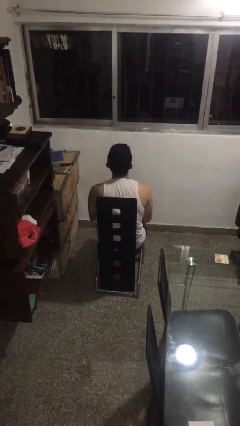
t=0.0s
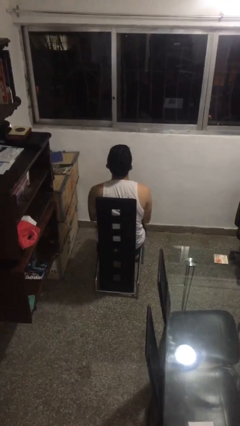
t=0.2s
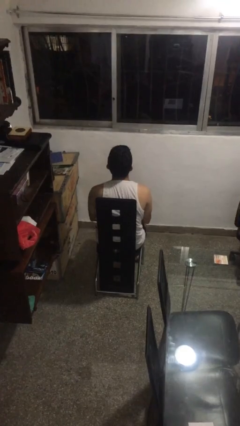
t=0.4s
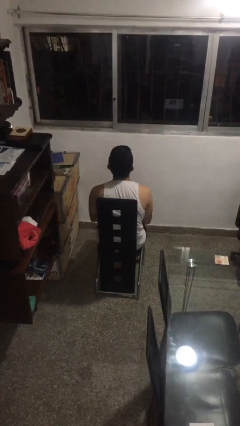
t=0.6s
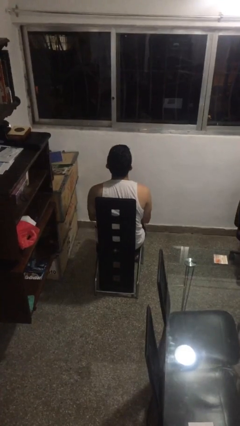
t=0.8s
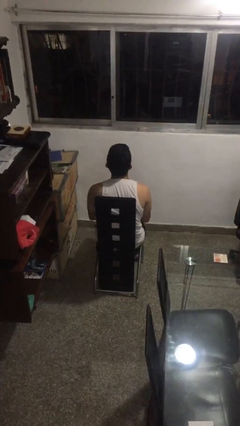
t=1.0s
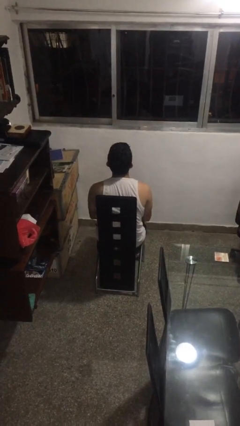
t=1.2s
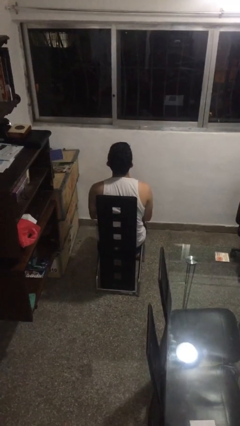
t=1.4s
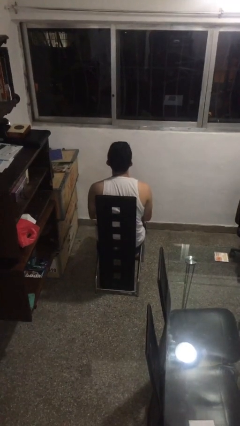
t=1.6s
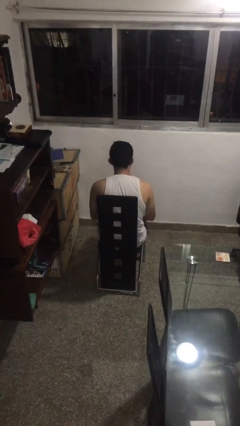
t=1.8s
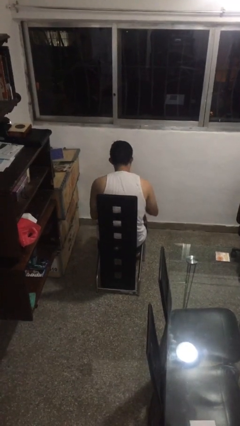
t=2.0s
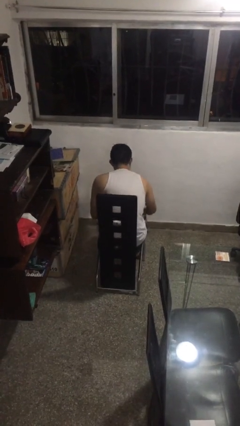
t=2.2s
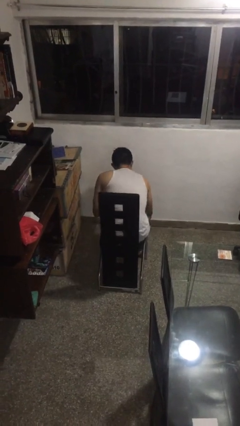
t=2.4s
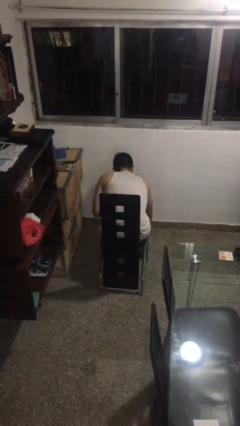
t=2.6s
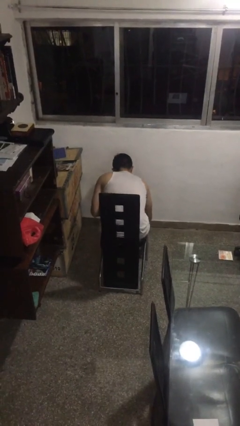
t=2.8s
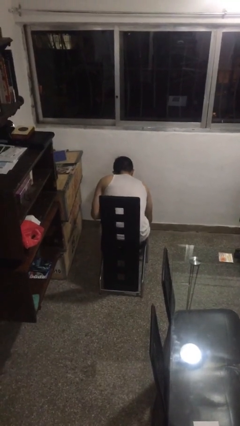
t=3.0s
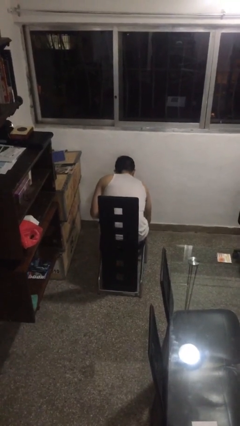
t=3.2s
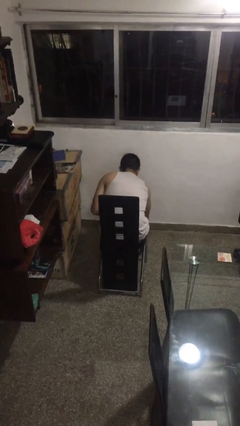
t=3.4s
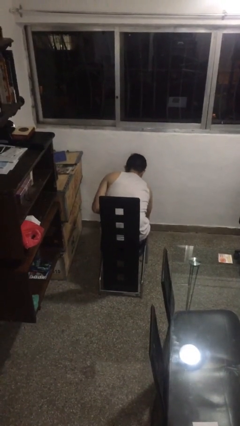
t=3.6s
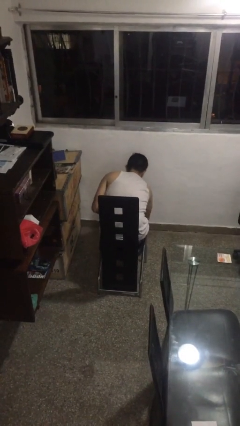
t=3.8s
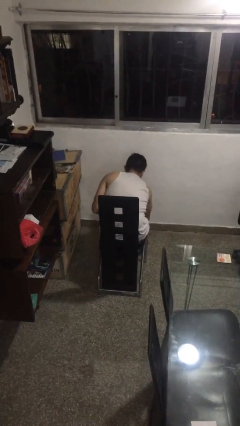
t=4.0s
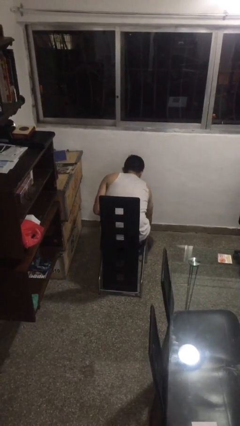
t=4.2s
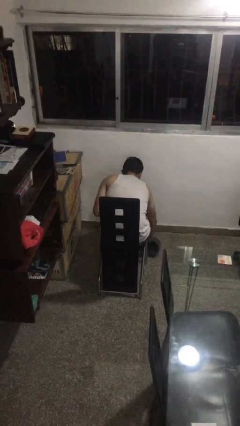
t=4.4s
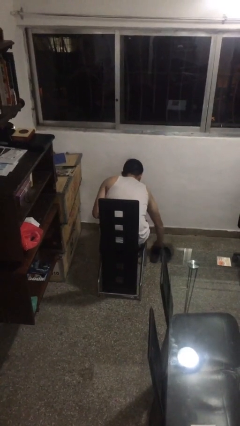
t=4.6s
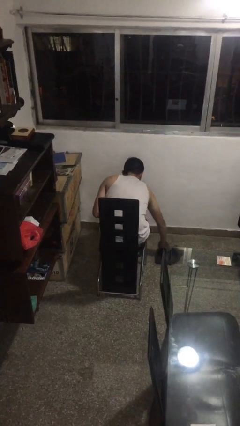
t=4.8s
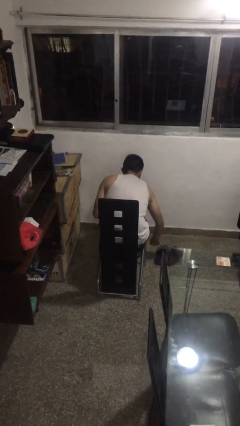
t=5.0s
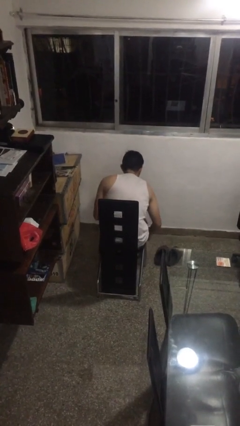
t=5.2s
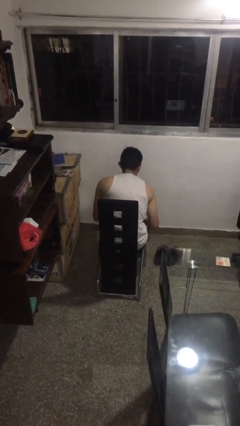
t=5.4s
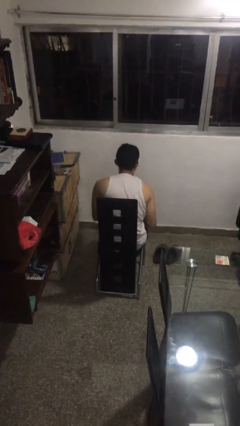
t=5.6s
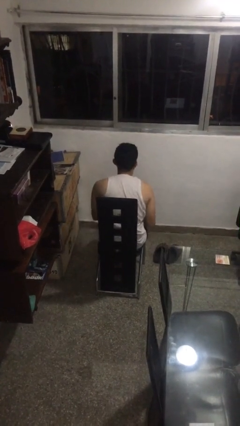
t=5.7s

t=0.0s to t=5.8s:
person takes off shoes

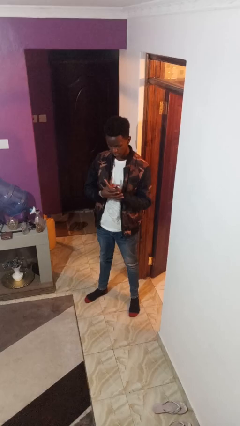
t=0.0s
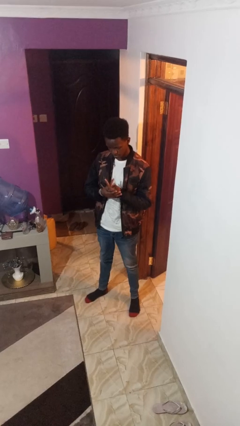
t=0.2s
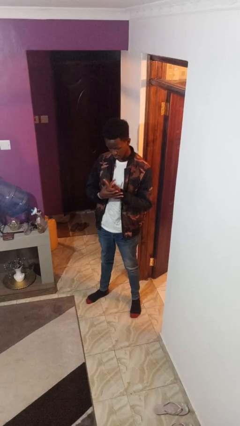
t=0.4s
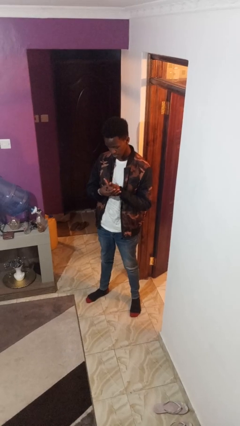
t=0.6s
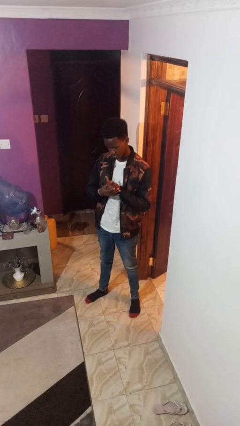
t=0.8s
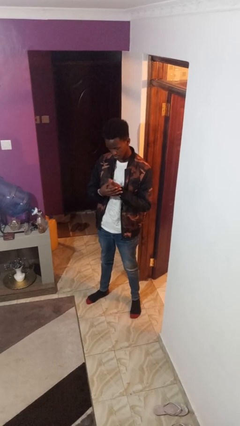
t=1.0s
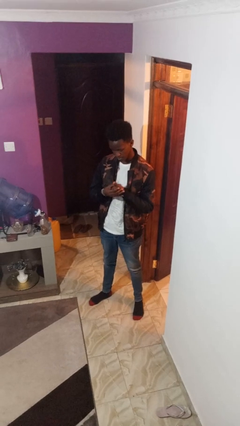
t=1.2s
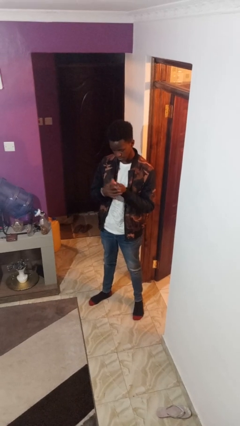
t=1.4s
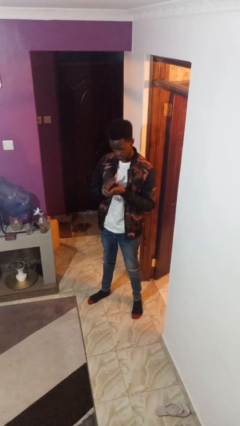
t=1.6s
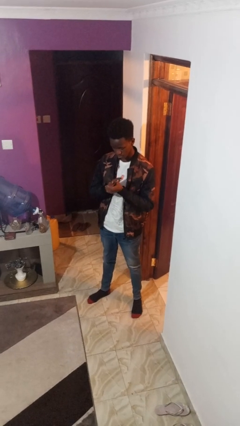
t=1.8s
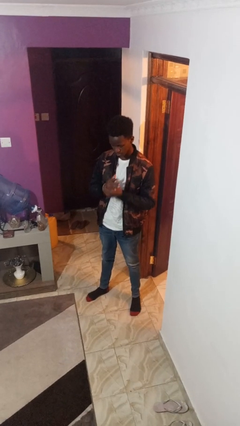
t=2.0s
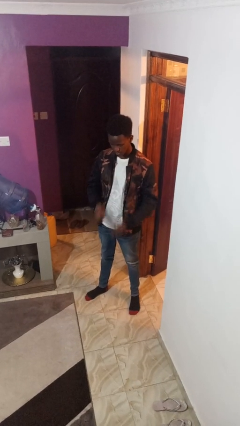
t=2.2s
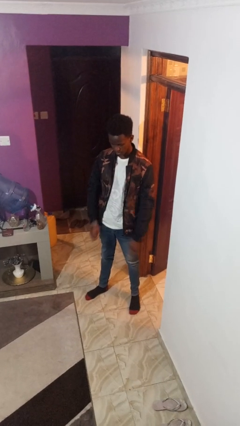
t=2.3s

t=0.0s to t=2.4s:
person cracks knuckles

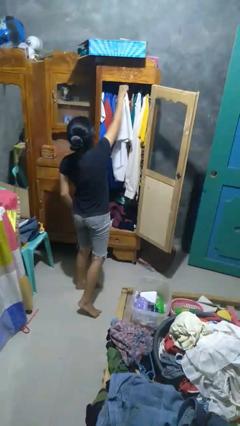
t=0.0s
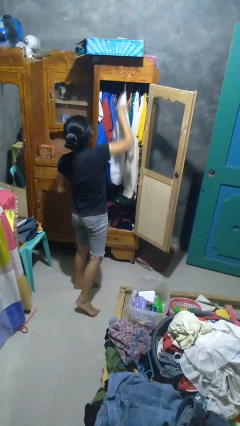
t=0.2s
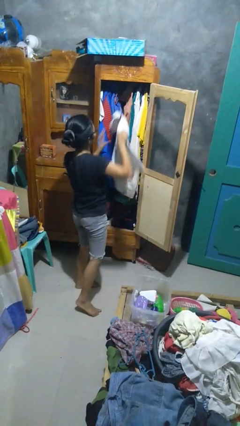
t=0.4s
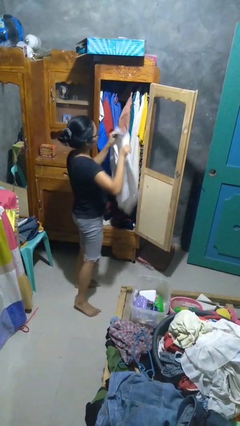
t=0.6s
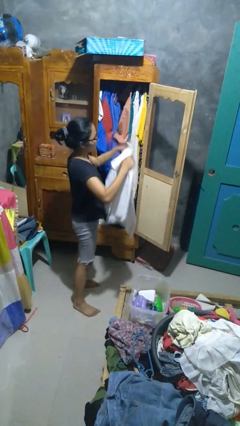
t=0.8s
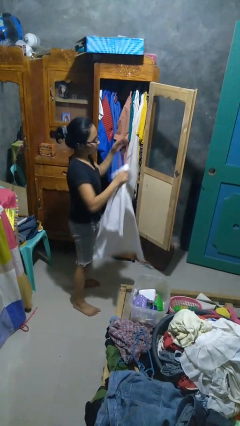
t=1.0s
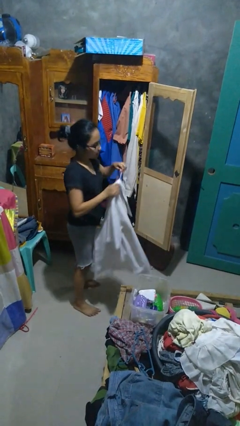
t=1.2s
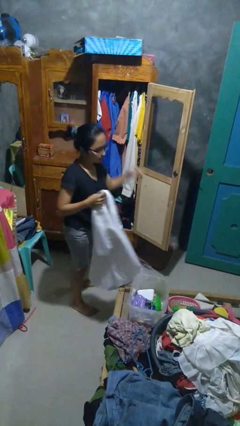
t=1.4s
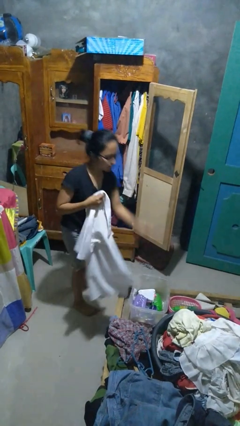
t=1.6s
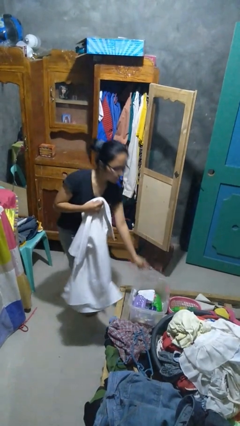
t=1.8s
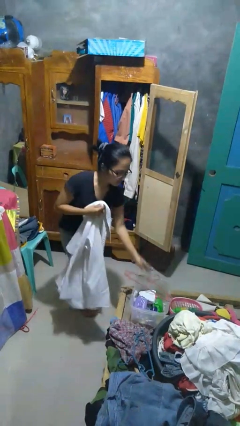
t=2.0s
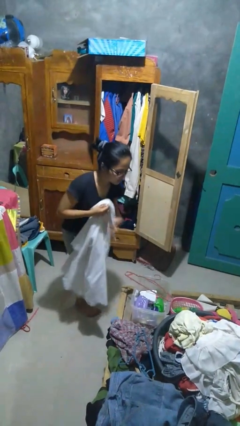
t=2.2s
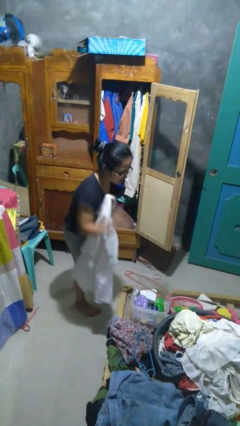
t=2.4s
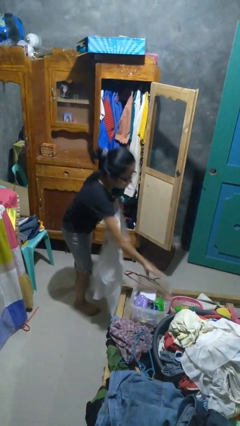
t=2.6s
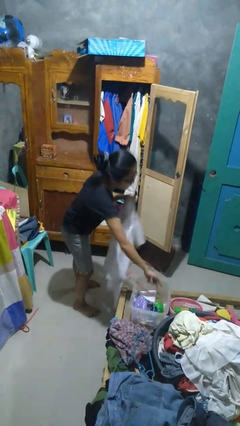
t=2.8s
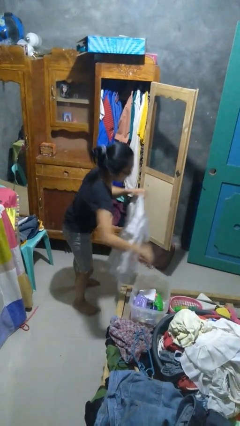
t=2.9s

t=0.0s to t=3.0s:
person takes clothes from closet

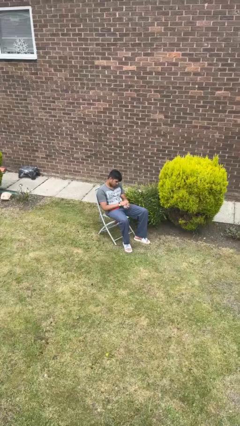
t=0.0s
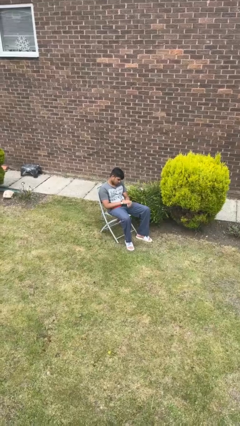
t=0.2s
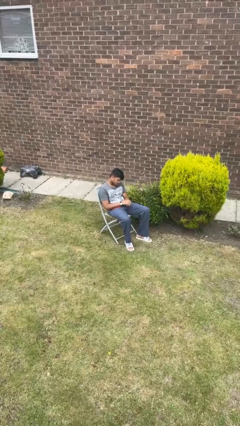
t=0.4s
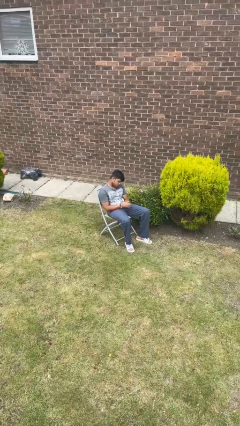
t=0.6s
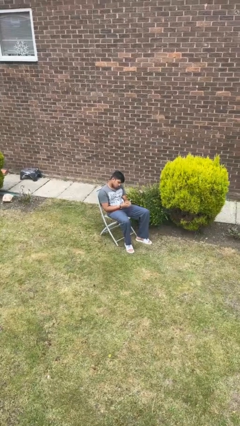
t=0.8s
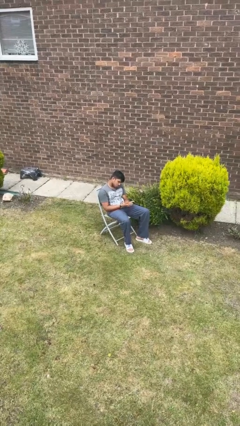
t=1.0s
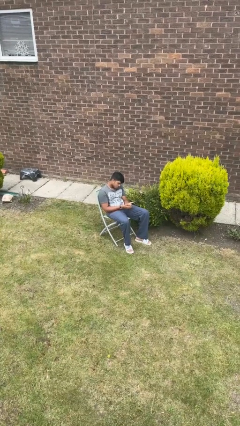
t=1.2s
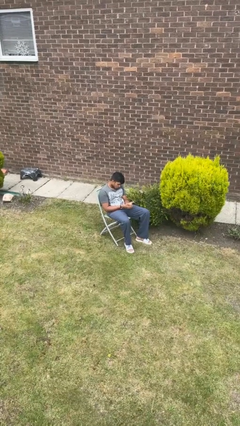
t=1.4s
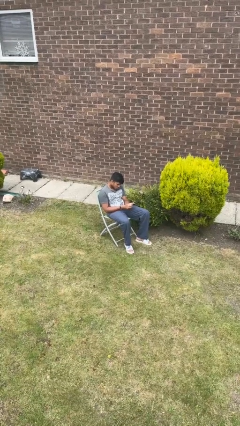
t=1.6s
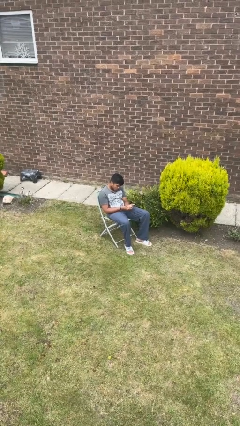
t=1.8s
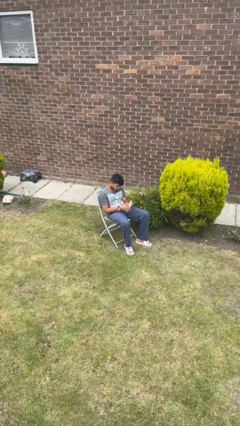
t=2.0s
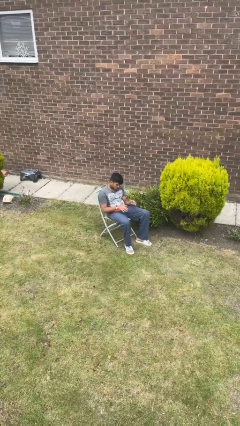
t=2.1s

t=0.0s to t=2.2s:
person looks at hands in lap

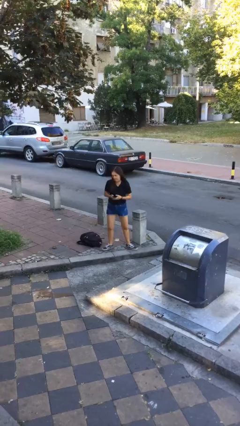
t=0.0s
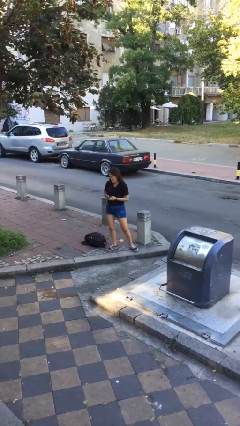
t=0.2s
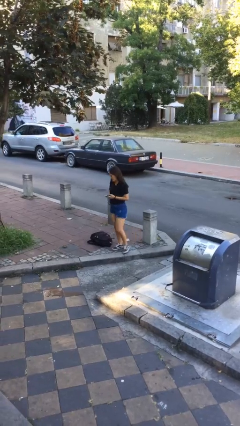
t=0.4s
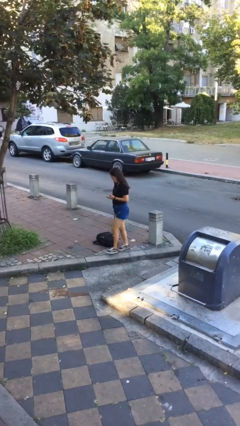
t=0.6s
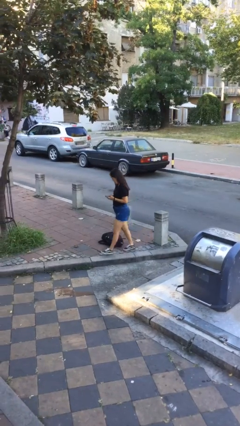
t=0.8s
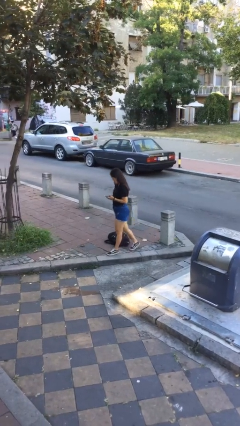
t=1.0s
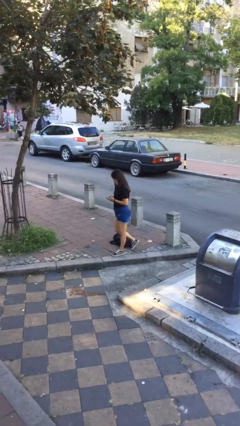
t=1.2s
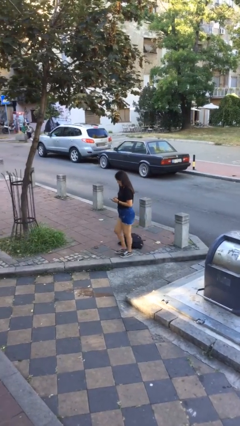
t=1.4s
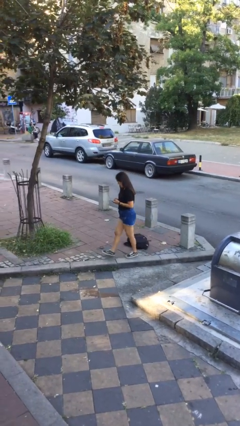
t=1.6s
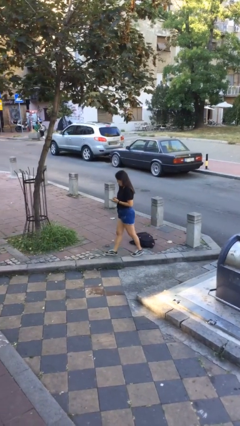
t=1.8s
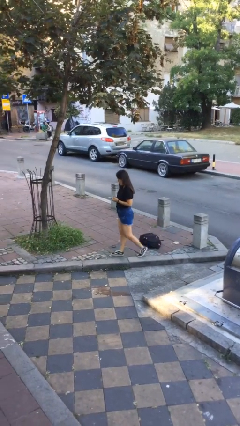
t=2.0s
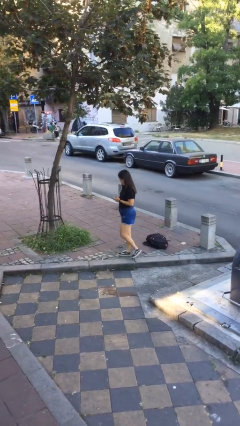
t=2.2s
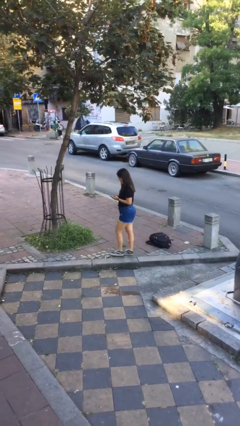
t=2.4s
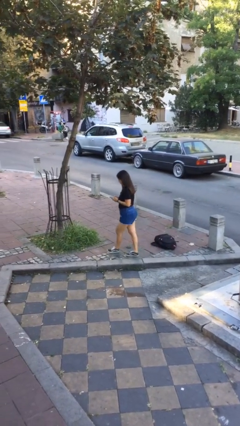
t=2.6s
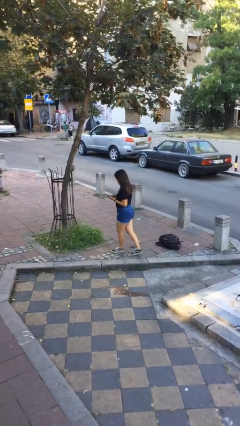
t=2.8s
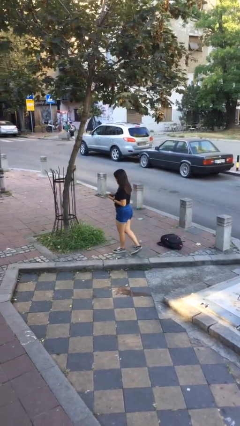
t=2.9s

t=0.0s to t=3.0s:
person texts on phone

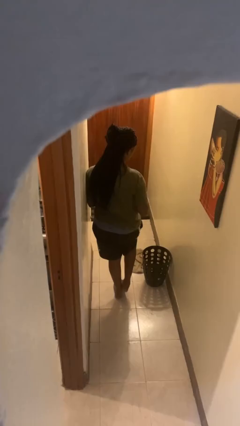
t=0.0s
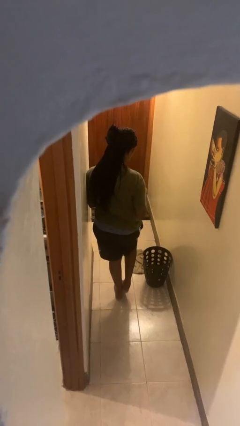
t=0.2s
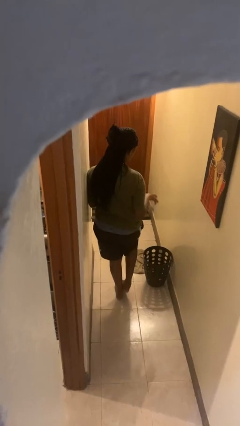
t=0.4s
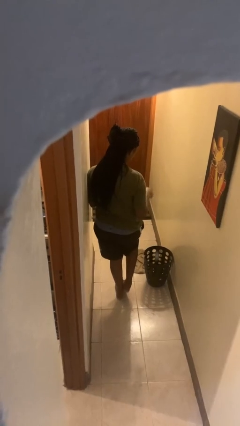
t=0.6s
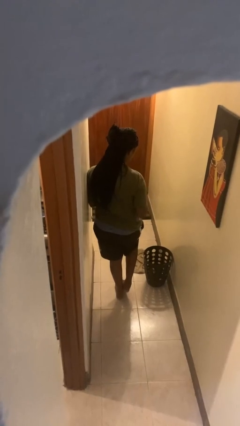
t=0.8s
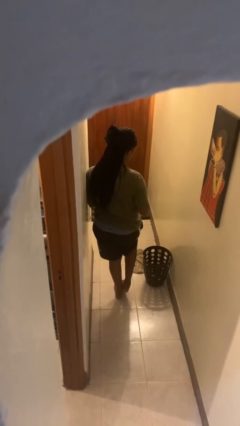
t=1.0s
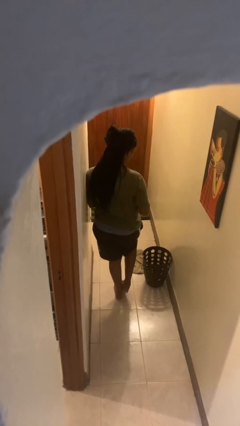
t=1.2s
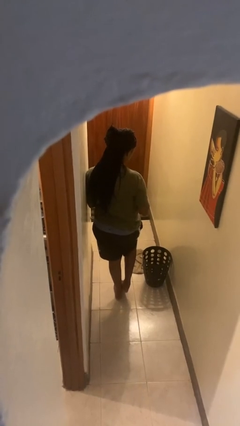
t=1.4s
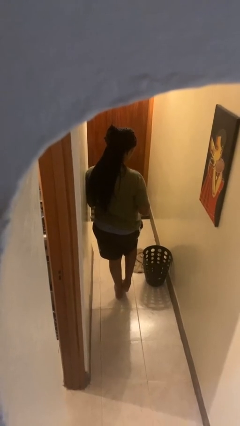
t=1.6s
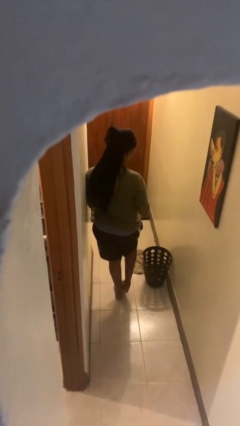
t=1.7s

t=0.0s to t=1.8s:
person discards trash
